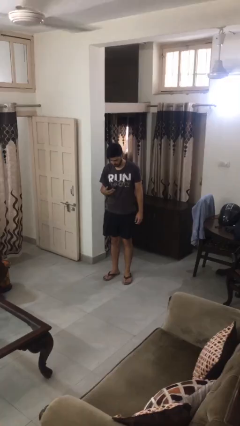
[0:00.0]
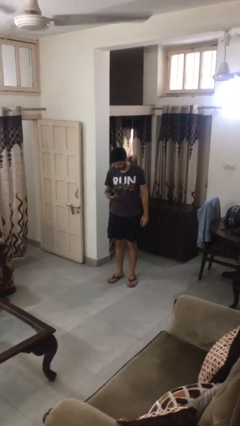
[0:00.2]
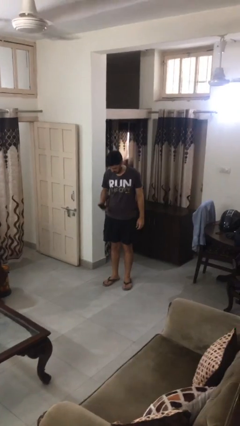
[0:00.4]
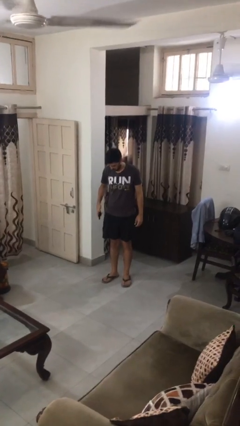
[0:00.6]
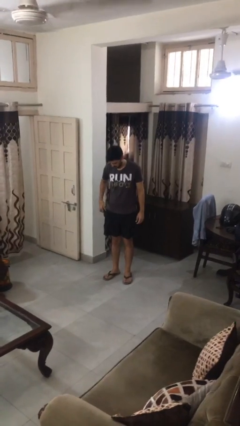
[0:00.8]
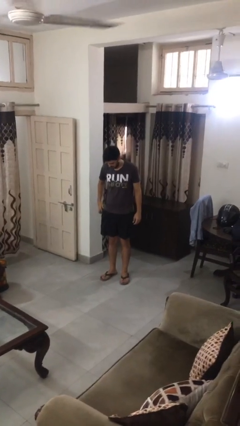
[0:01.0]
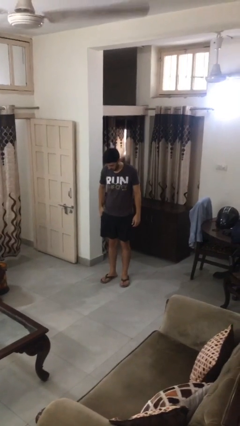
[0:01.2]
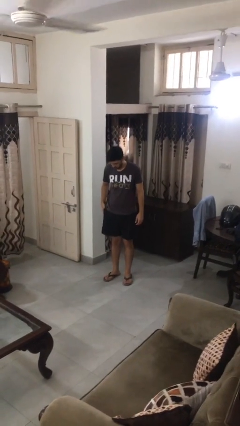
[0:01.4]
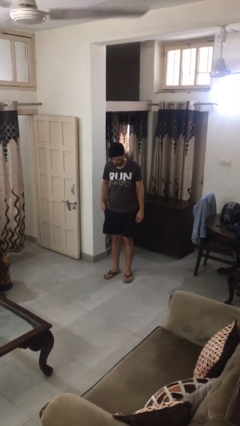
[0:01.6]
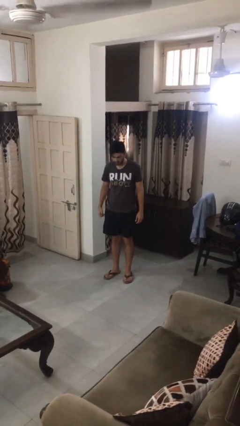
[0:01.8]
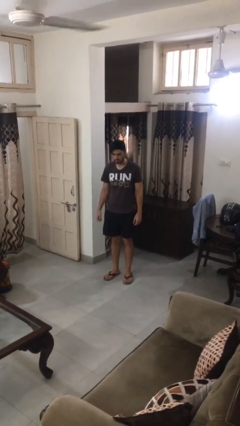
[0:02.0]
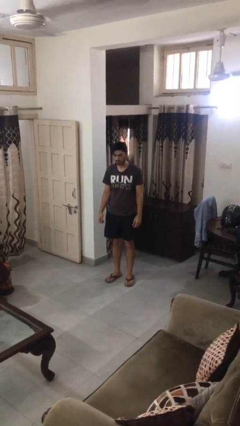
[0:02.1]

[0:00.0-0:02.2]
person puts phone into pocket

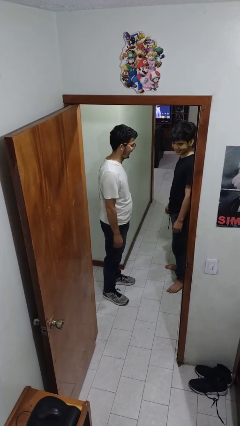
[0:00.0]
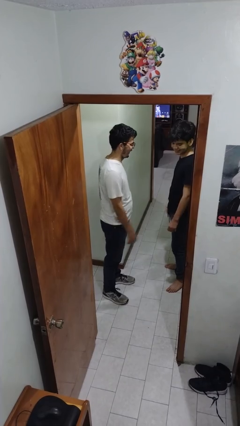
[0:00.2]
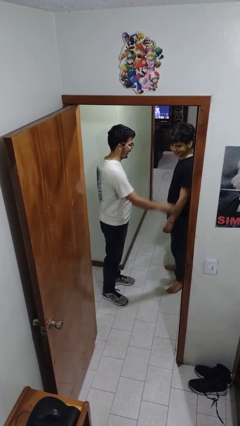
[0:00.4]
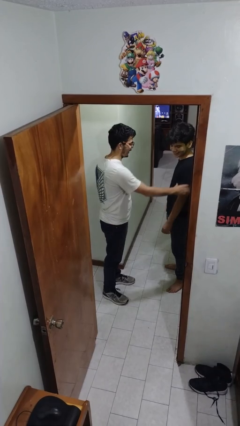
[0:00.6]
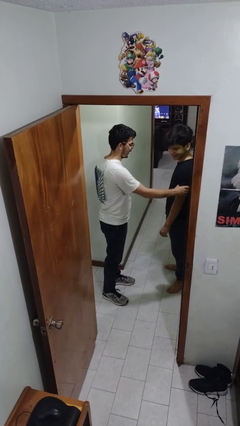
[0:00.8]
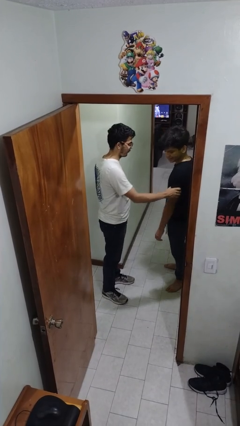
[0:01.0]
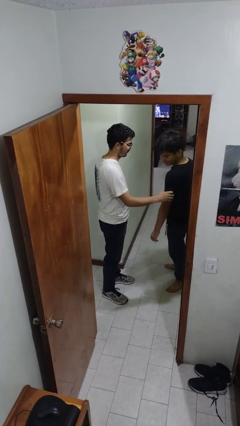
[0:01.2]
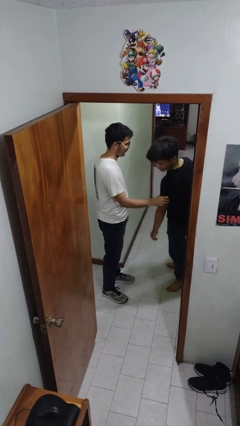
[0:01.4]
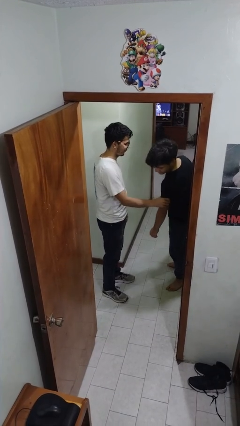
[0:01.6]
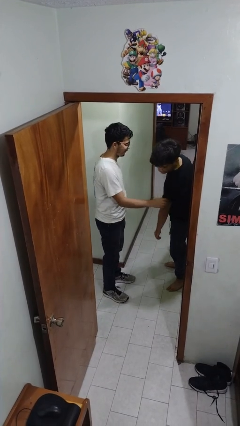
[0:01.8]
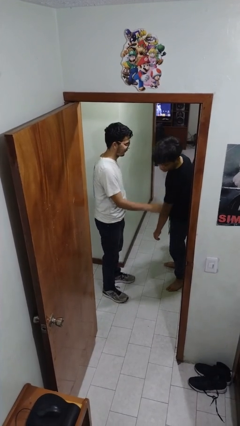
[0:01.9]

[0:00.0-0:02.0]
person grabs person by bicep

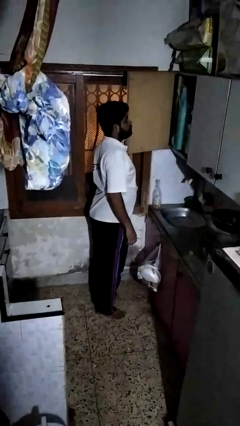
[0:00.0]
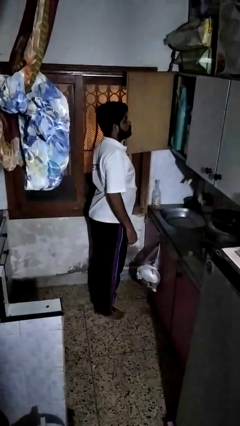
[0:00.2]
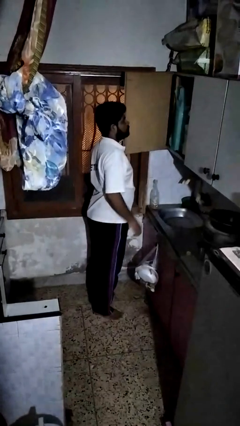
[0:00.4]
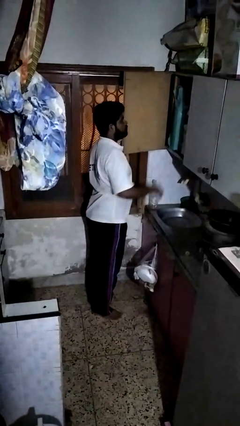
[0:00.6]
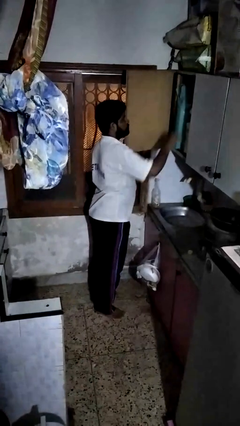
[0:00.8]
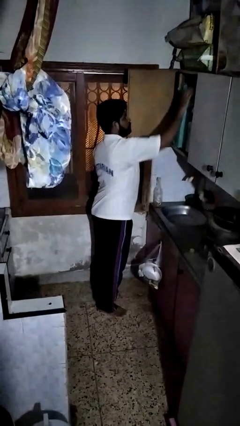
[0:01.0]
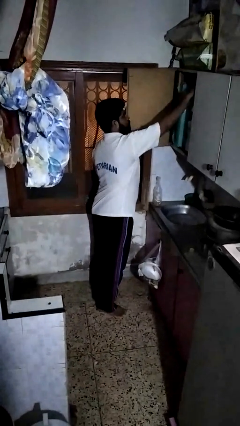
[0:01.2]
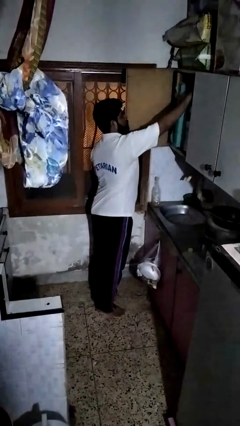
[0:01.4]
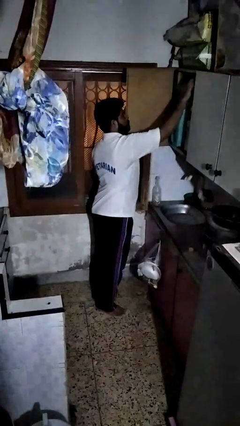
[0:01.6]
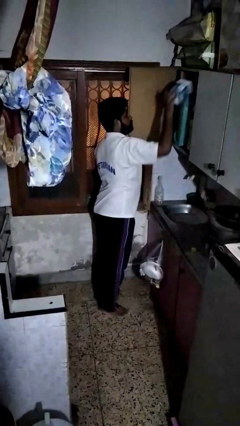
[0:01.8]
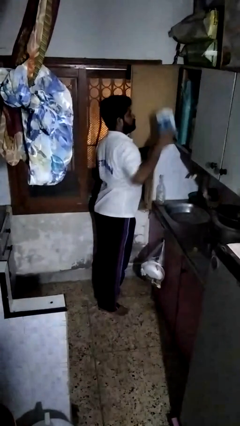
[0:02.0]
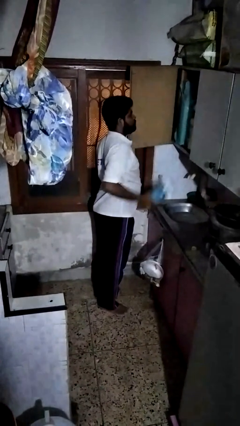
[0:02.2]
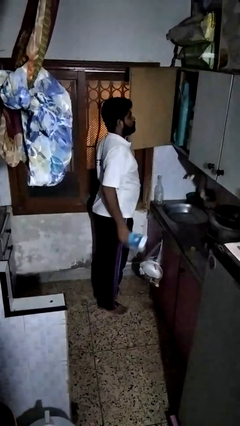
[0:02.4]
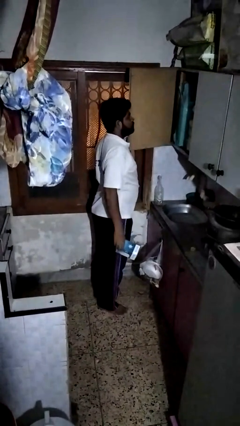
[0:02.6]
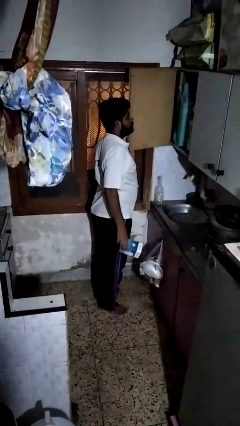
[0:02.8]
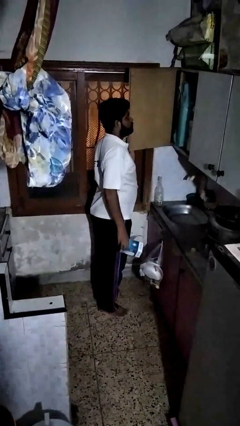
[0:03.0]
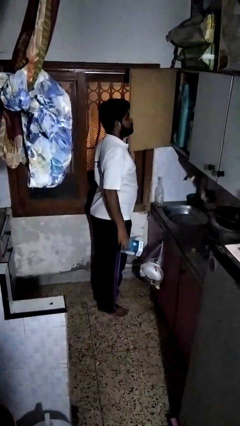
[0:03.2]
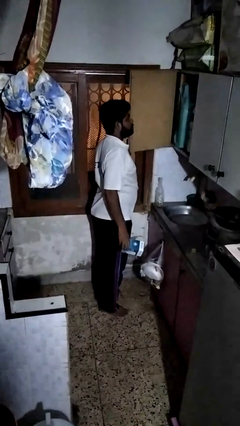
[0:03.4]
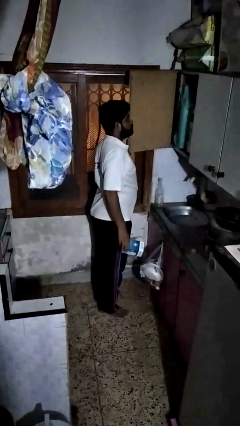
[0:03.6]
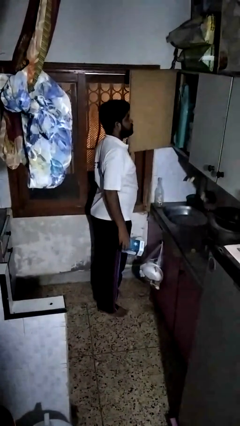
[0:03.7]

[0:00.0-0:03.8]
person picks up object from cabinet

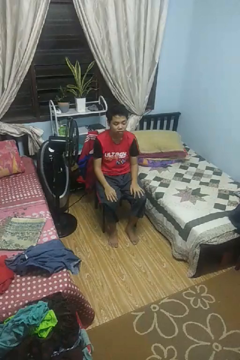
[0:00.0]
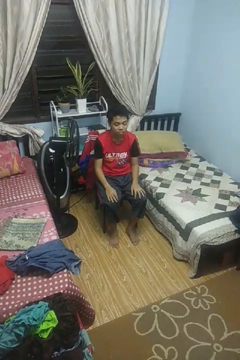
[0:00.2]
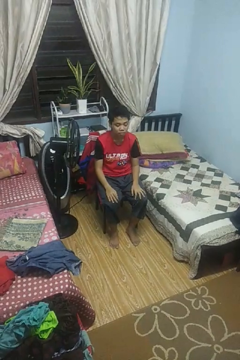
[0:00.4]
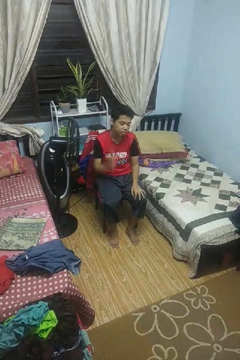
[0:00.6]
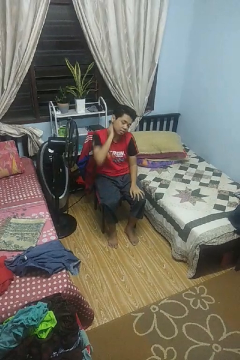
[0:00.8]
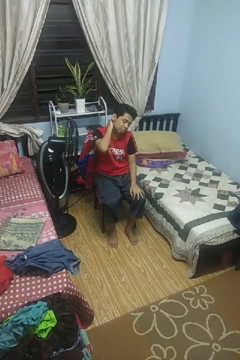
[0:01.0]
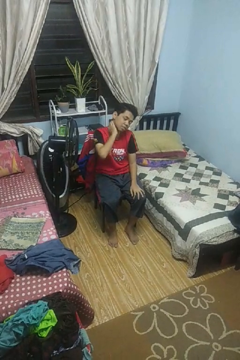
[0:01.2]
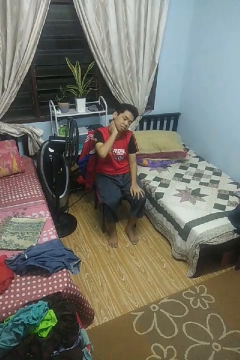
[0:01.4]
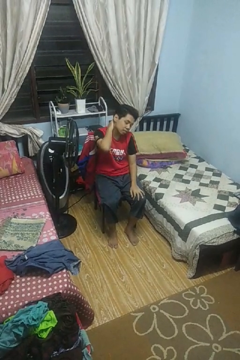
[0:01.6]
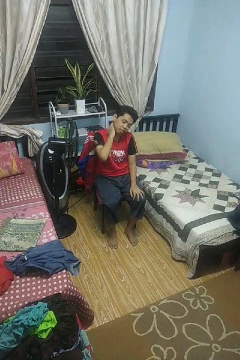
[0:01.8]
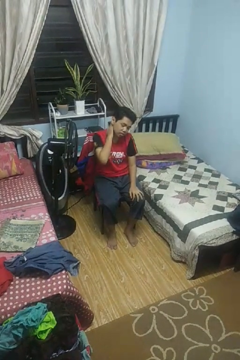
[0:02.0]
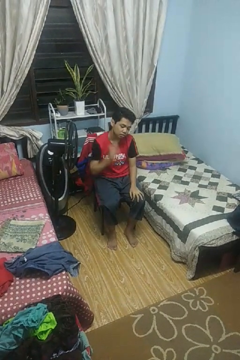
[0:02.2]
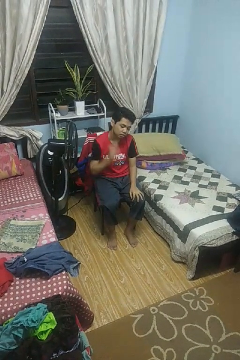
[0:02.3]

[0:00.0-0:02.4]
person rubs neck

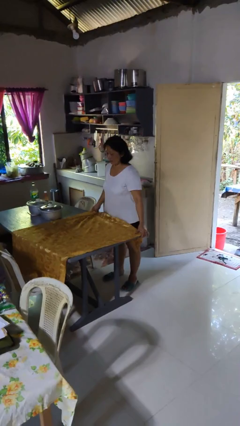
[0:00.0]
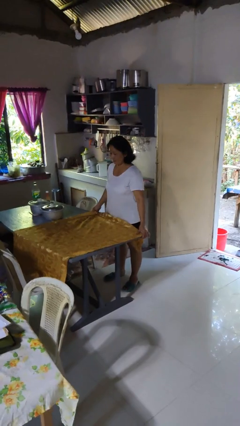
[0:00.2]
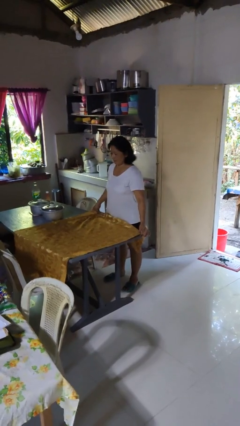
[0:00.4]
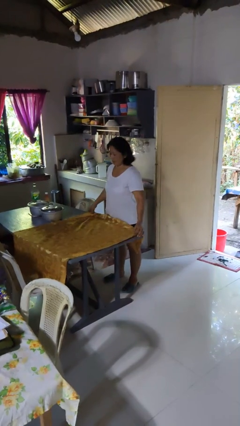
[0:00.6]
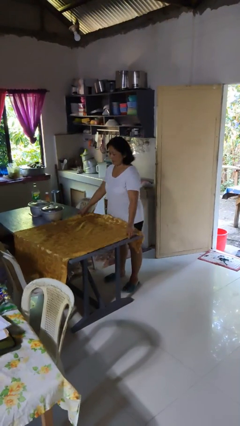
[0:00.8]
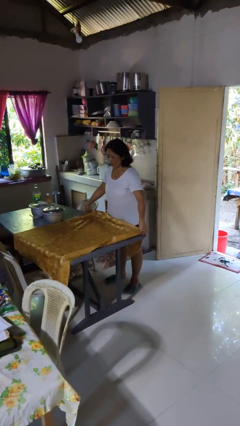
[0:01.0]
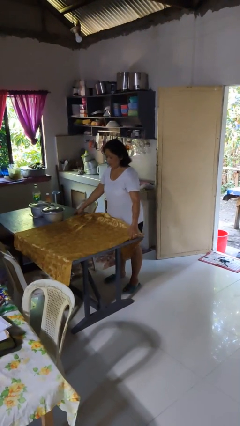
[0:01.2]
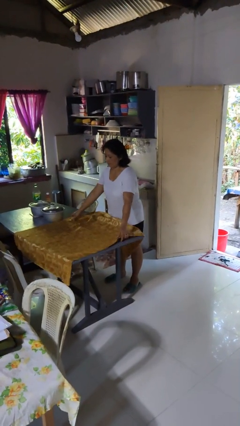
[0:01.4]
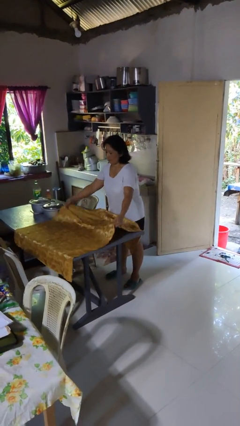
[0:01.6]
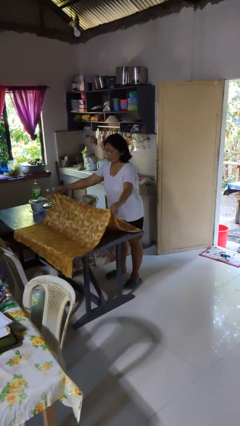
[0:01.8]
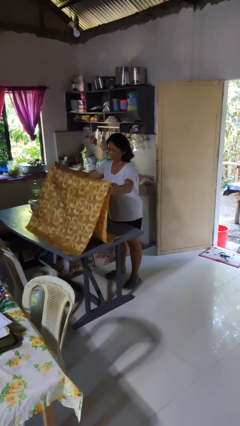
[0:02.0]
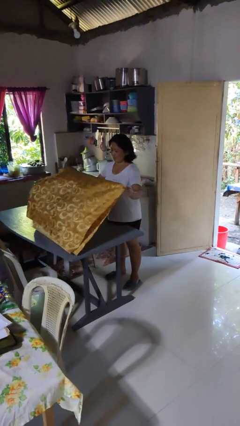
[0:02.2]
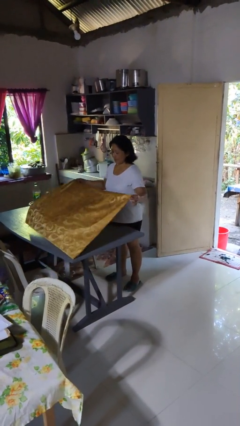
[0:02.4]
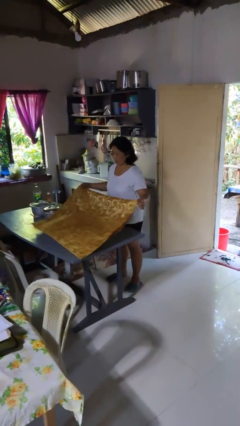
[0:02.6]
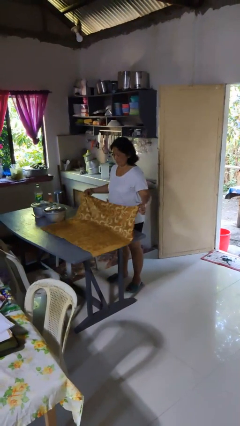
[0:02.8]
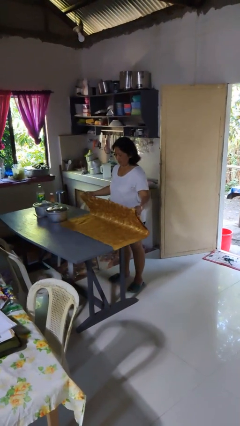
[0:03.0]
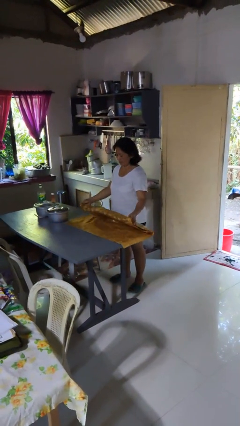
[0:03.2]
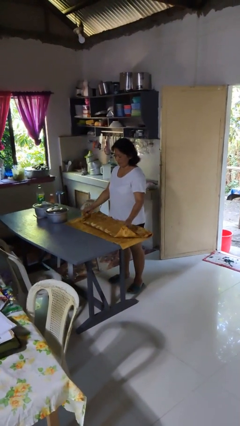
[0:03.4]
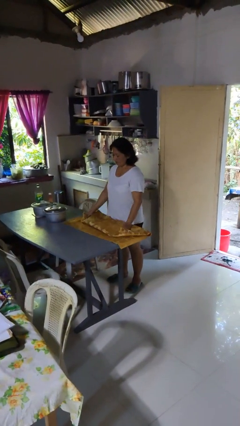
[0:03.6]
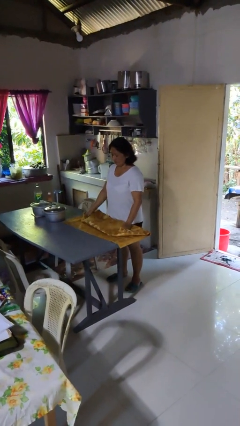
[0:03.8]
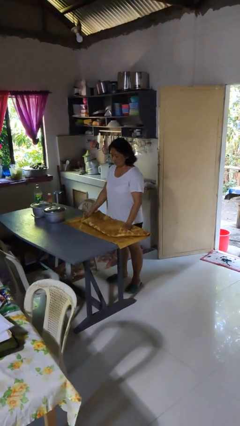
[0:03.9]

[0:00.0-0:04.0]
person folds tablecloth

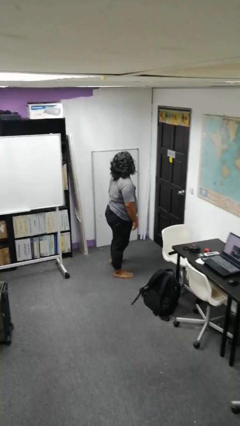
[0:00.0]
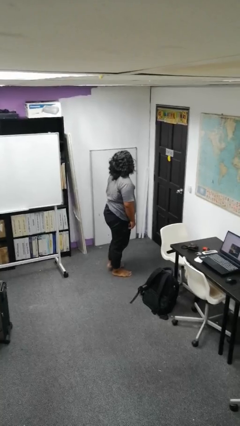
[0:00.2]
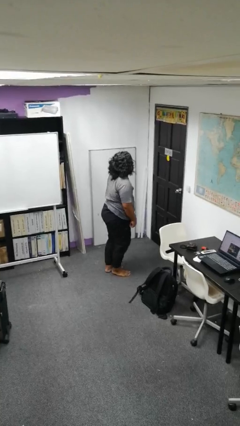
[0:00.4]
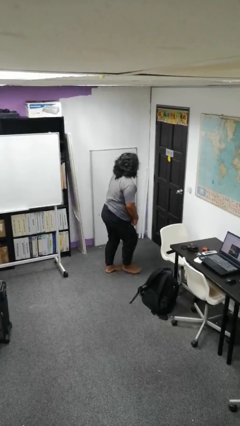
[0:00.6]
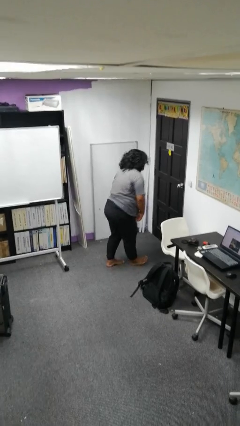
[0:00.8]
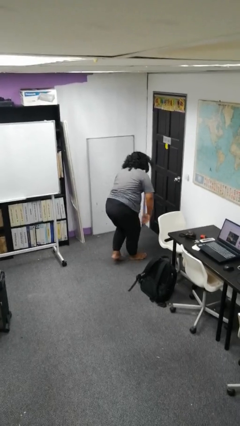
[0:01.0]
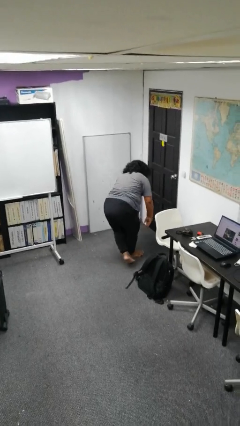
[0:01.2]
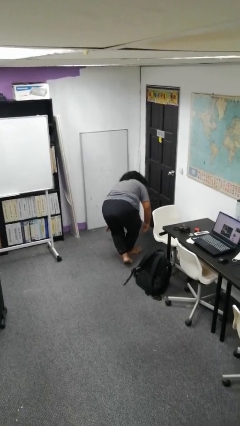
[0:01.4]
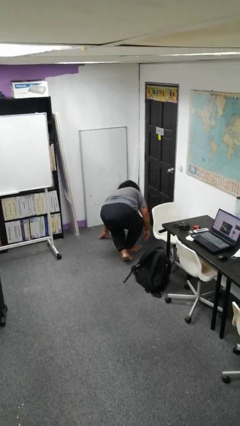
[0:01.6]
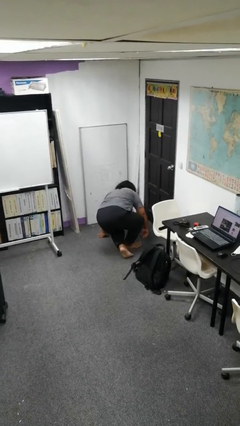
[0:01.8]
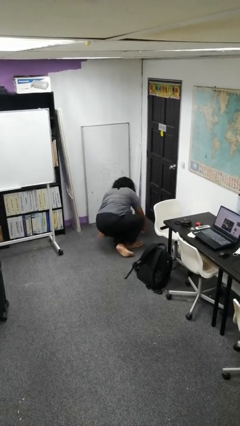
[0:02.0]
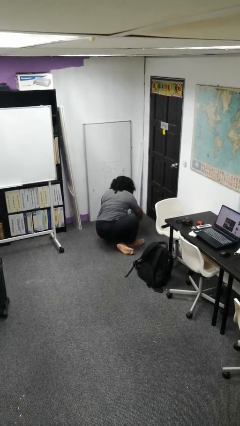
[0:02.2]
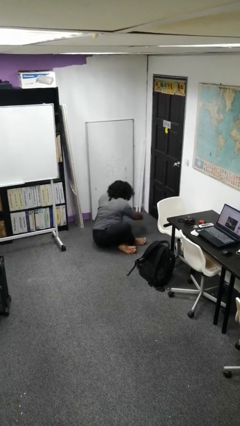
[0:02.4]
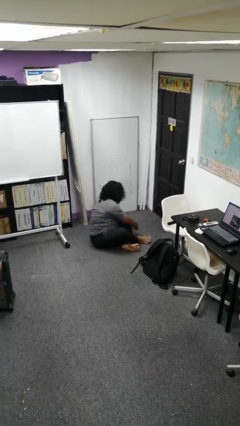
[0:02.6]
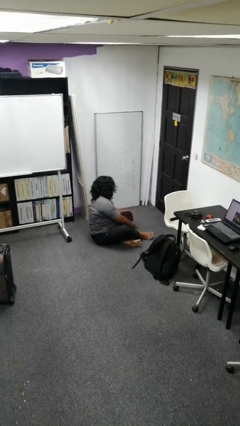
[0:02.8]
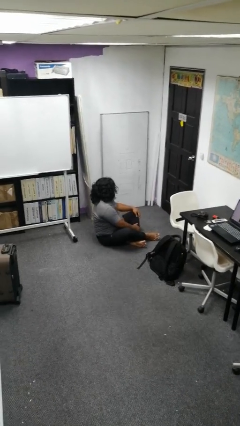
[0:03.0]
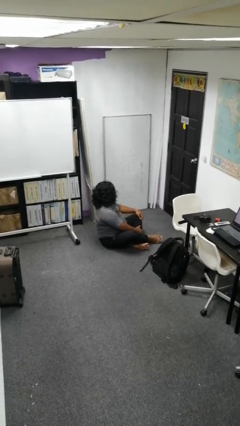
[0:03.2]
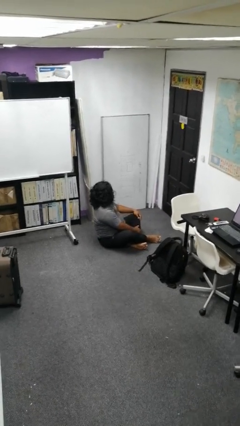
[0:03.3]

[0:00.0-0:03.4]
person sits crisscross
